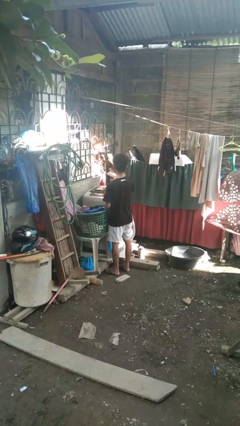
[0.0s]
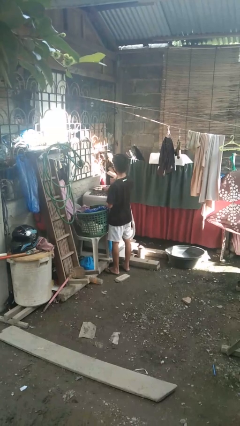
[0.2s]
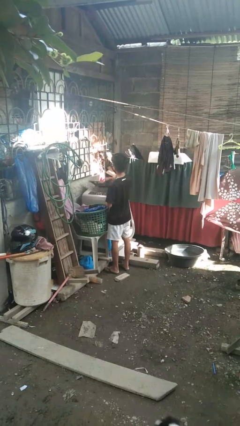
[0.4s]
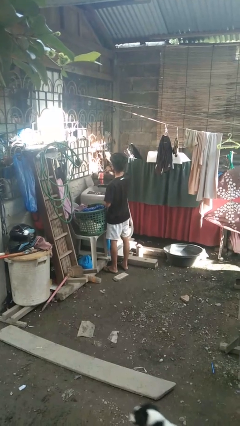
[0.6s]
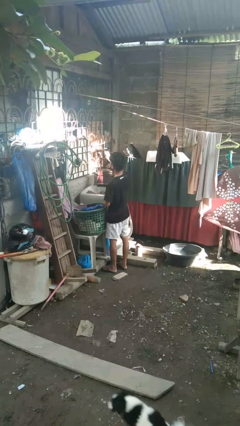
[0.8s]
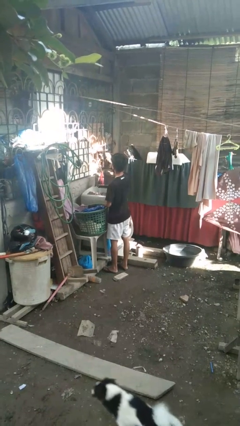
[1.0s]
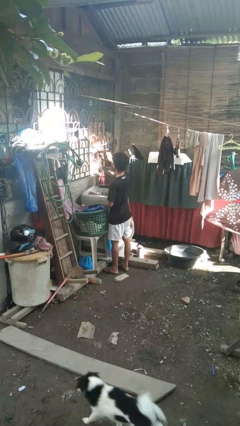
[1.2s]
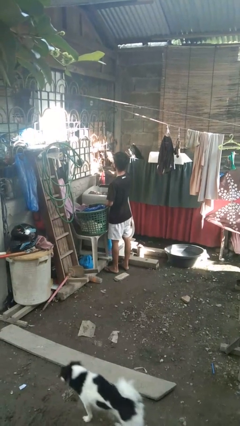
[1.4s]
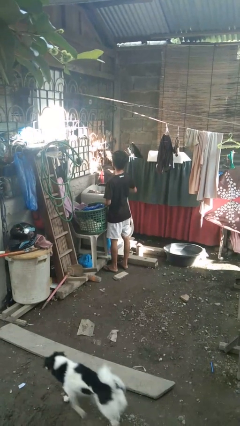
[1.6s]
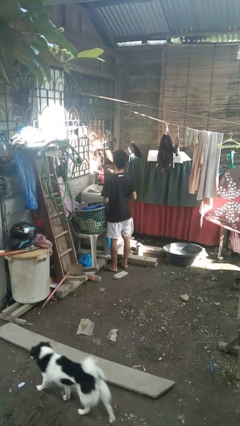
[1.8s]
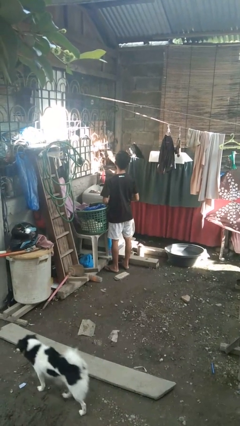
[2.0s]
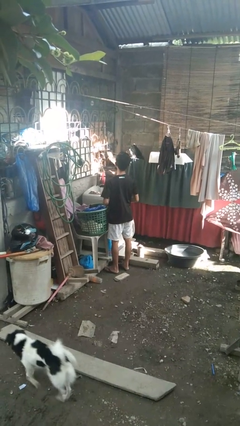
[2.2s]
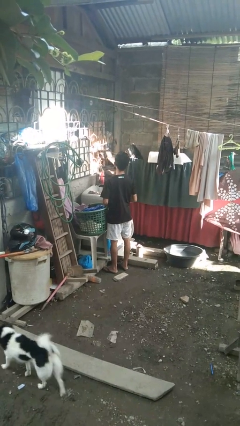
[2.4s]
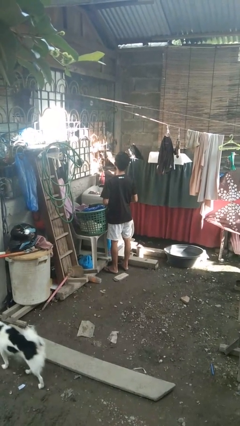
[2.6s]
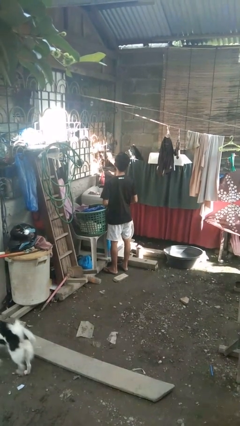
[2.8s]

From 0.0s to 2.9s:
person opens clothes washer

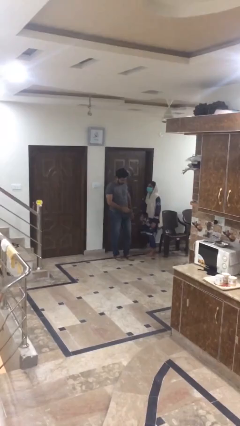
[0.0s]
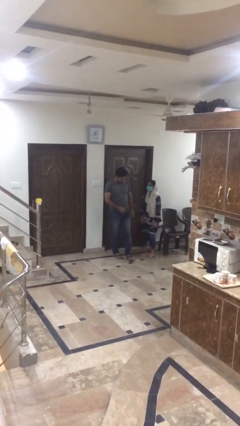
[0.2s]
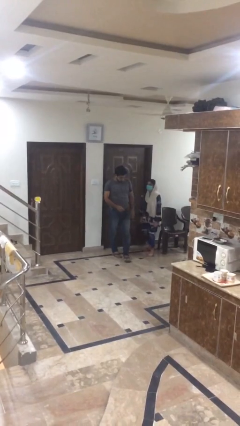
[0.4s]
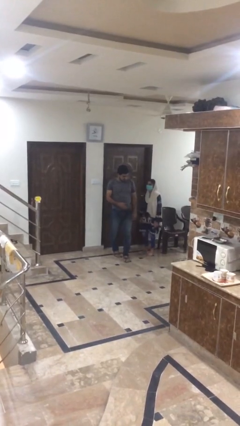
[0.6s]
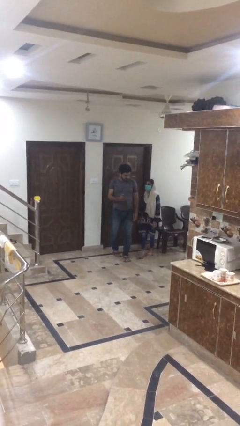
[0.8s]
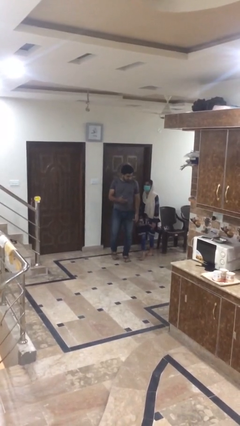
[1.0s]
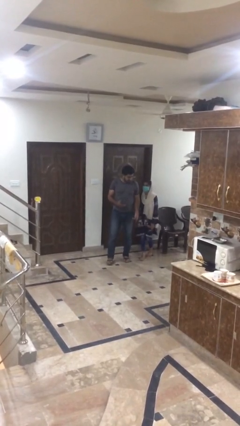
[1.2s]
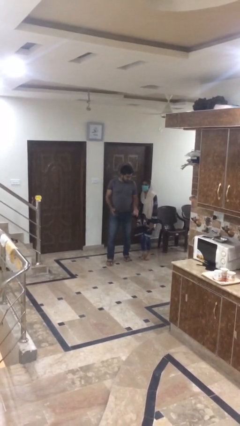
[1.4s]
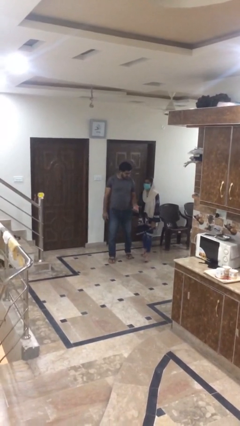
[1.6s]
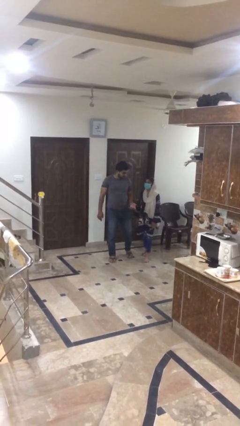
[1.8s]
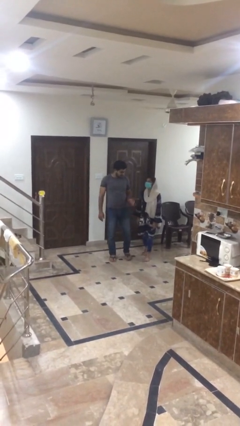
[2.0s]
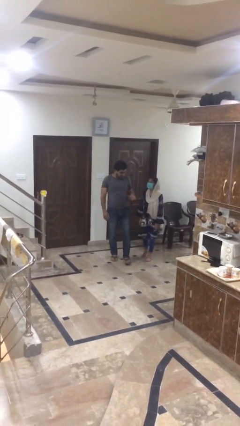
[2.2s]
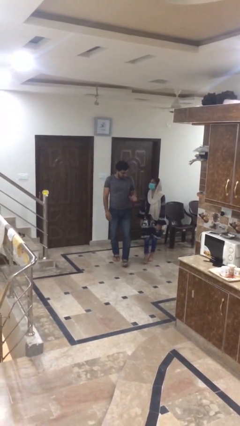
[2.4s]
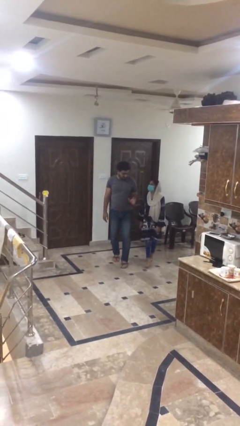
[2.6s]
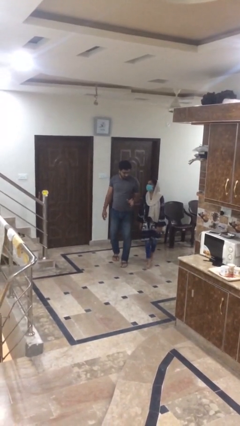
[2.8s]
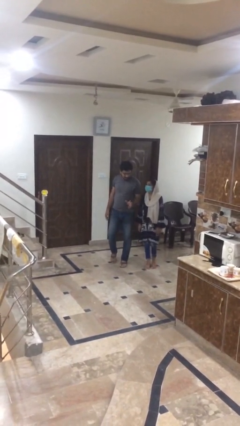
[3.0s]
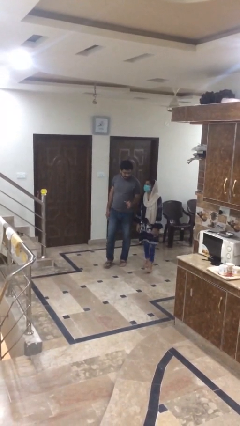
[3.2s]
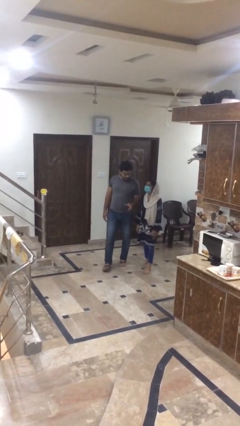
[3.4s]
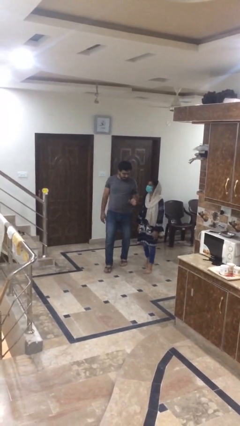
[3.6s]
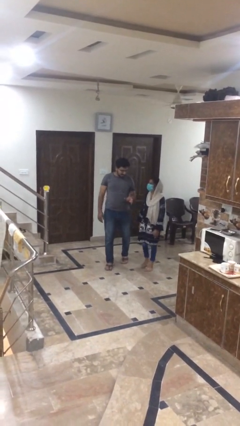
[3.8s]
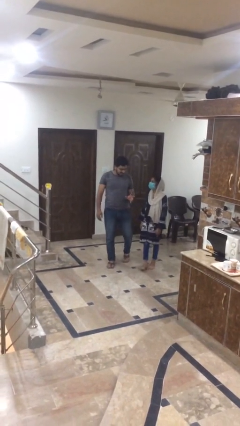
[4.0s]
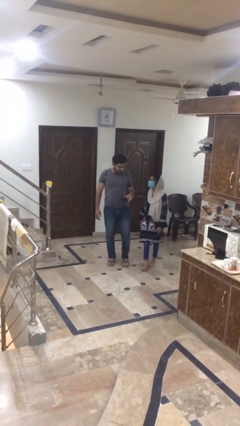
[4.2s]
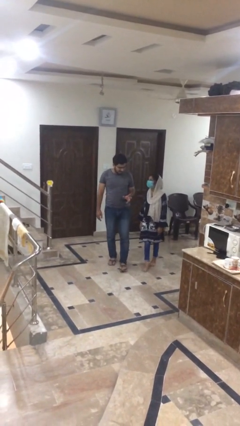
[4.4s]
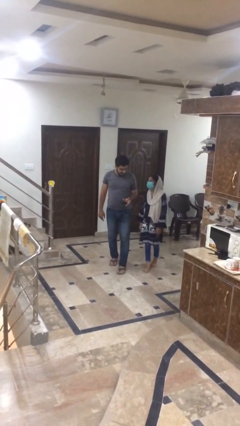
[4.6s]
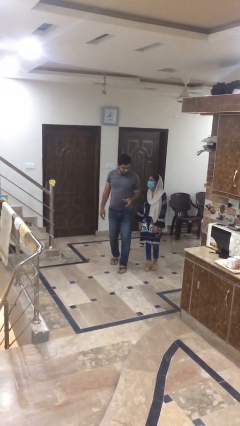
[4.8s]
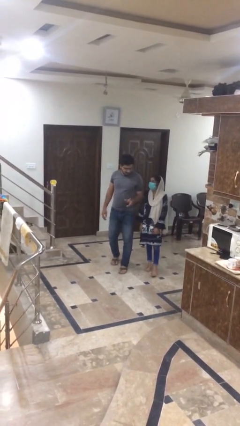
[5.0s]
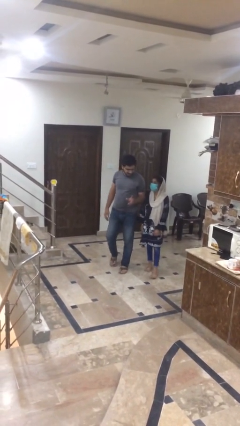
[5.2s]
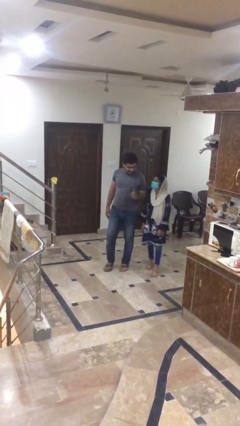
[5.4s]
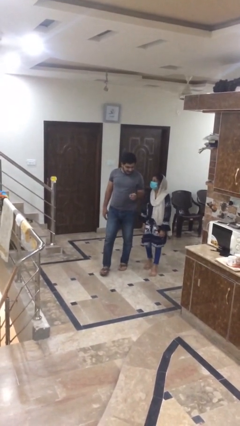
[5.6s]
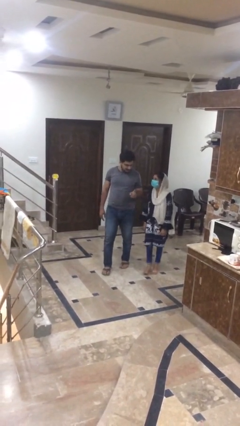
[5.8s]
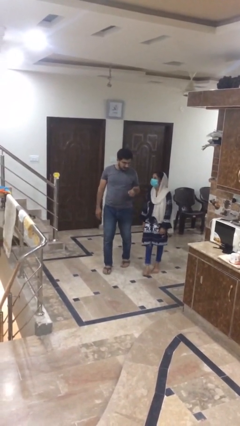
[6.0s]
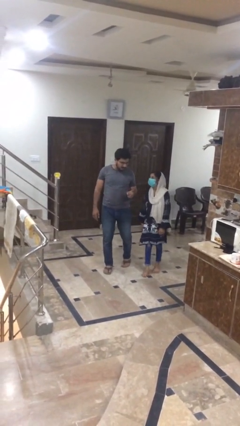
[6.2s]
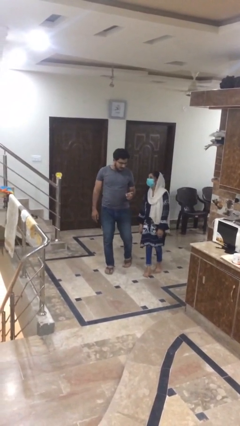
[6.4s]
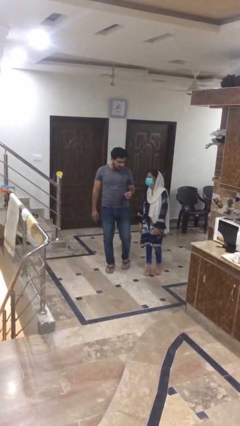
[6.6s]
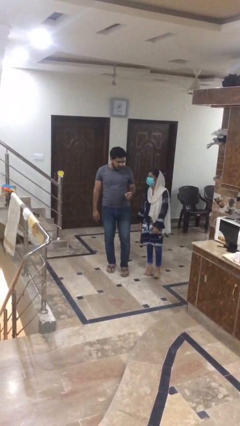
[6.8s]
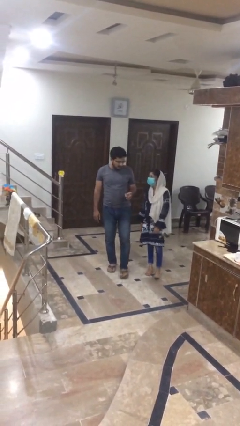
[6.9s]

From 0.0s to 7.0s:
person talks to person

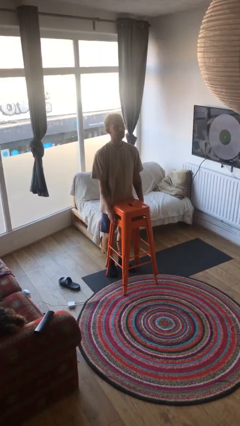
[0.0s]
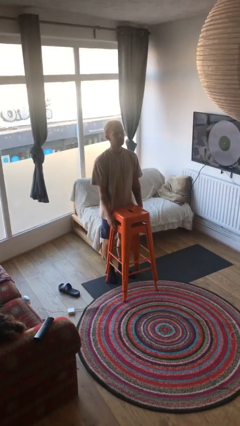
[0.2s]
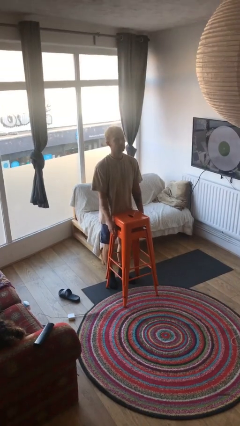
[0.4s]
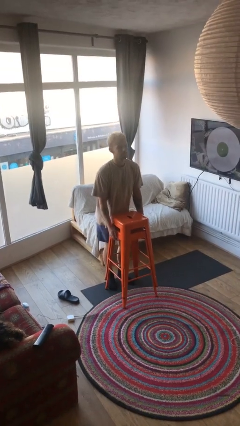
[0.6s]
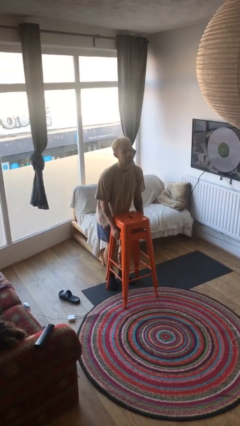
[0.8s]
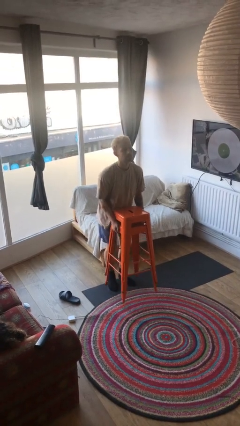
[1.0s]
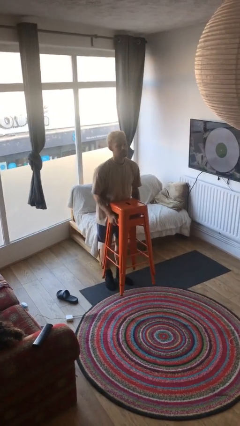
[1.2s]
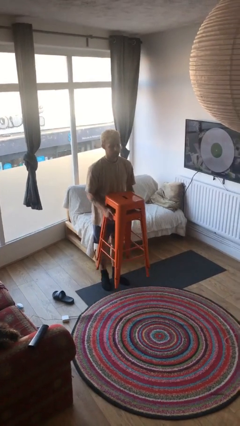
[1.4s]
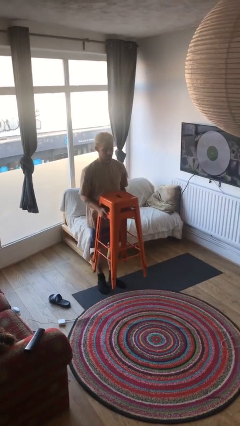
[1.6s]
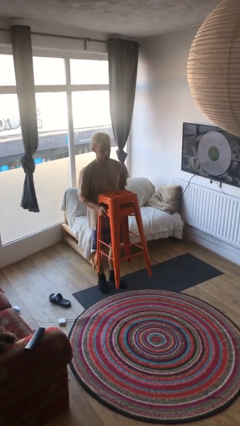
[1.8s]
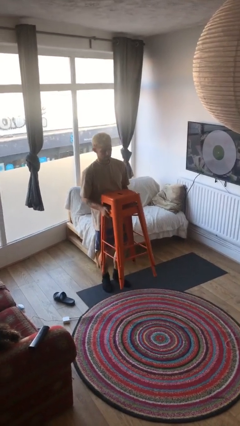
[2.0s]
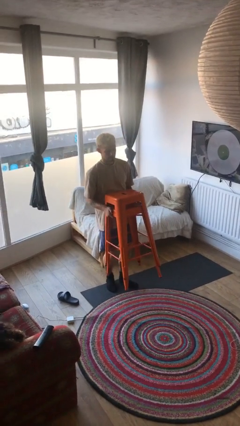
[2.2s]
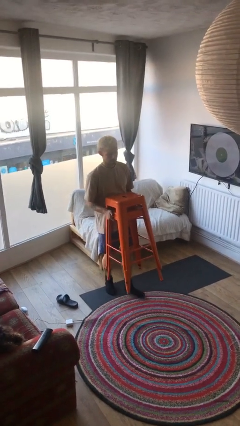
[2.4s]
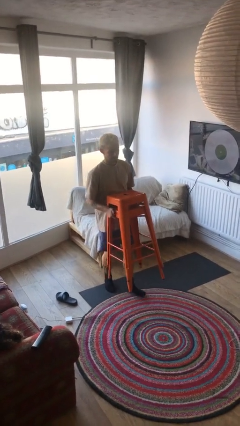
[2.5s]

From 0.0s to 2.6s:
person picks up object from floor

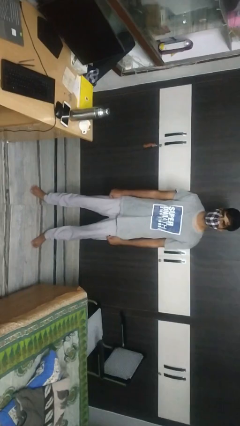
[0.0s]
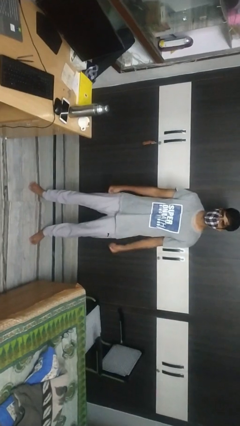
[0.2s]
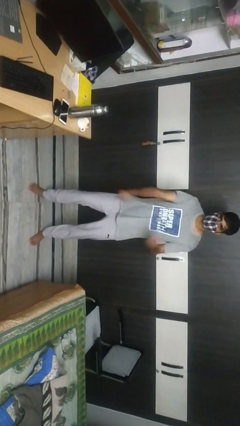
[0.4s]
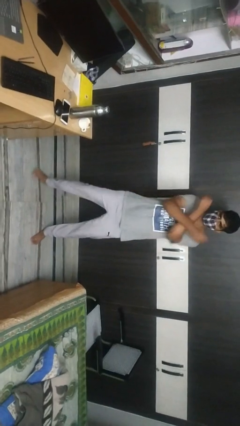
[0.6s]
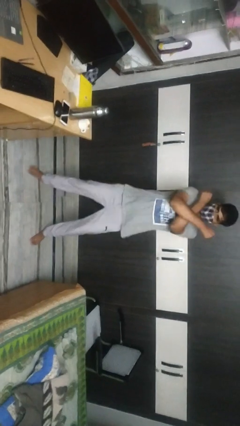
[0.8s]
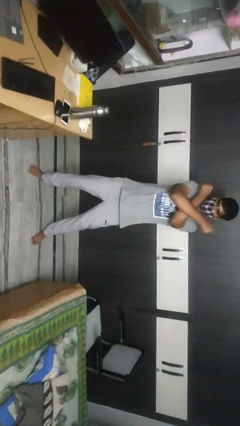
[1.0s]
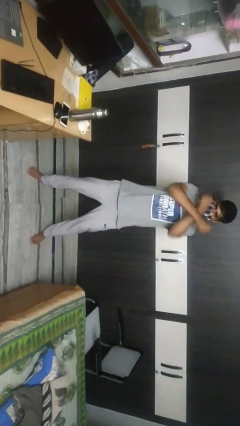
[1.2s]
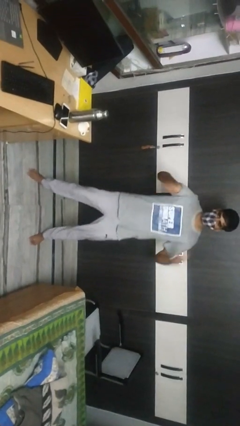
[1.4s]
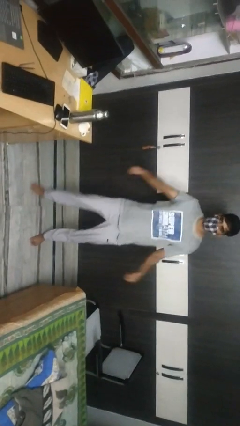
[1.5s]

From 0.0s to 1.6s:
person gestures arms x

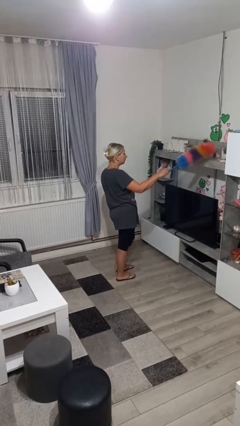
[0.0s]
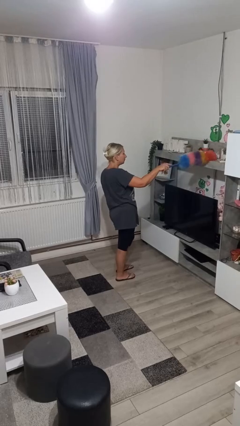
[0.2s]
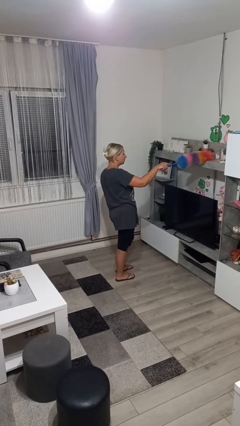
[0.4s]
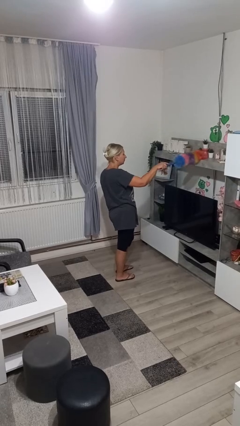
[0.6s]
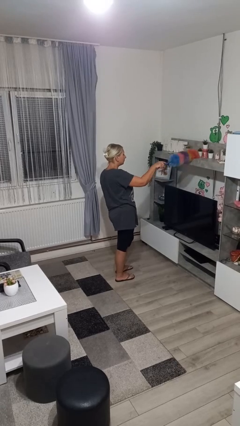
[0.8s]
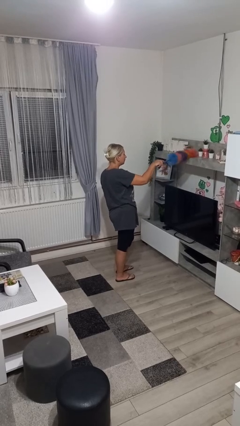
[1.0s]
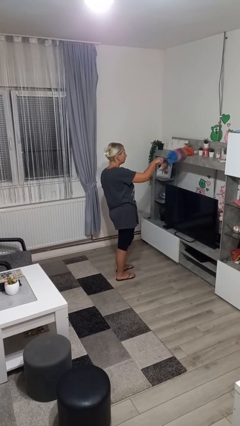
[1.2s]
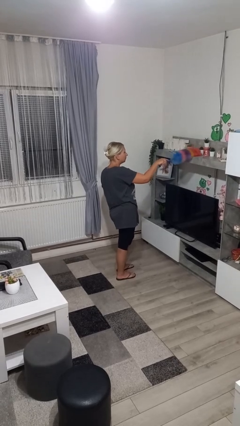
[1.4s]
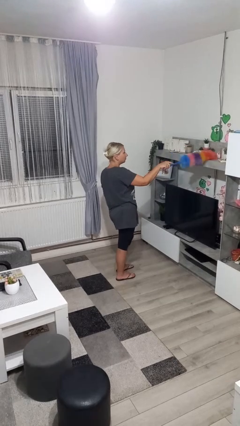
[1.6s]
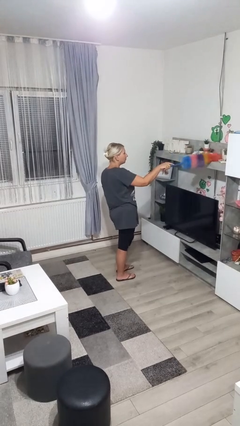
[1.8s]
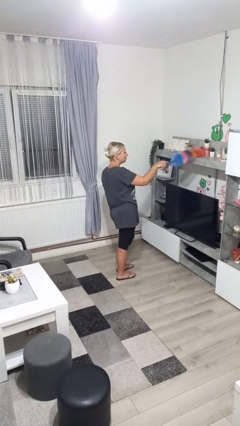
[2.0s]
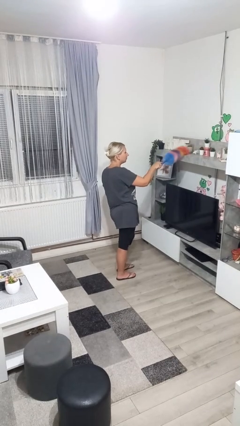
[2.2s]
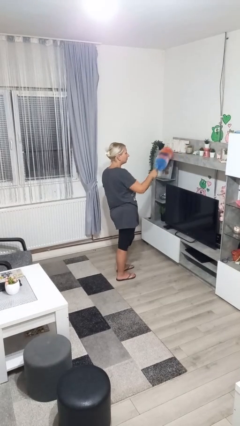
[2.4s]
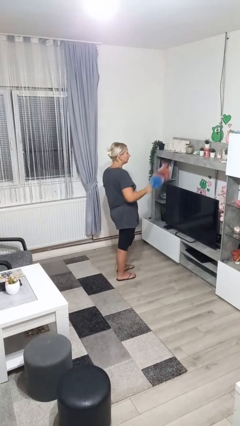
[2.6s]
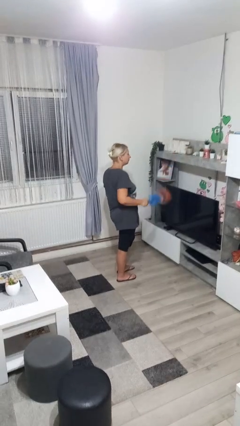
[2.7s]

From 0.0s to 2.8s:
person dusts furniture

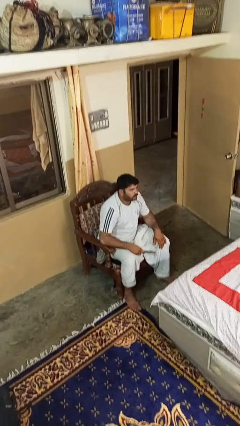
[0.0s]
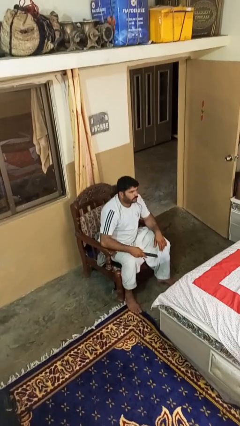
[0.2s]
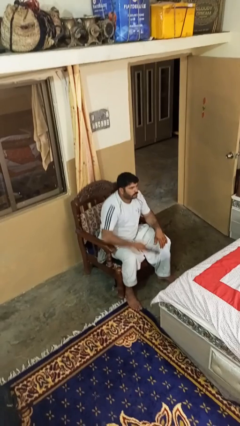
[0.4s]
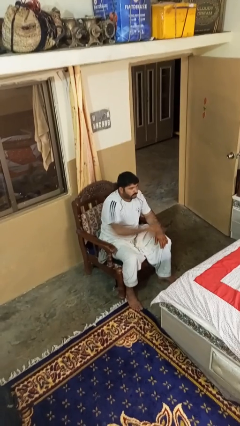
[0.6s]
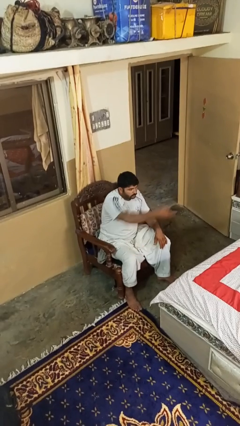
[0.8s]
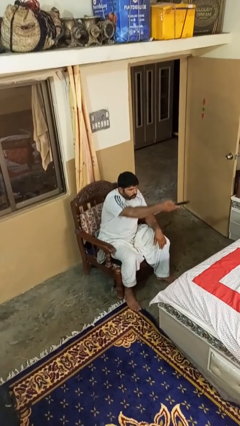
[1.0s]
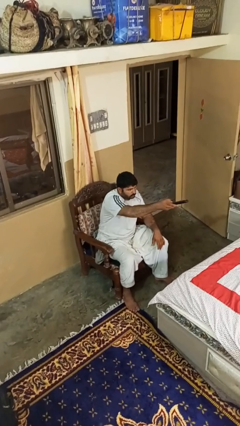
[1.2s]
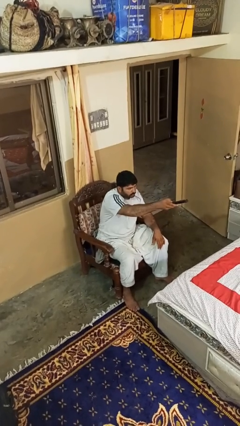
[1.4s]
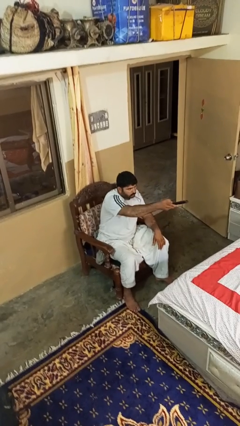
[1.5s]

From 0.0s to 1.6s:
person uses television remote
